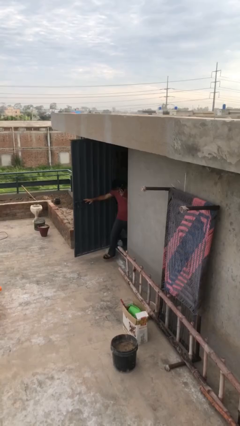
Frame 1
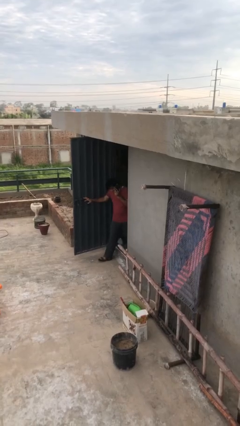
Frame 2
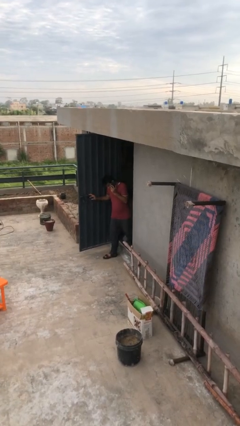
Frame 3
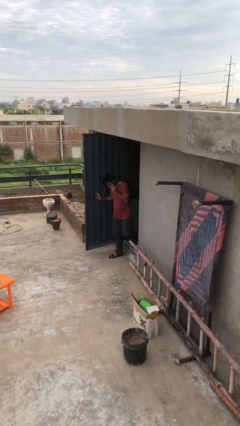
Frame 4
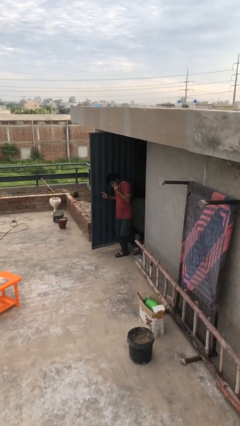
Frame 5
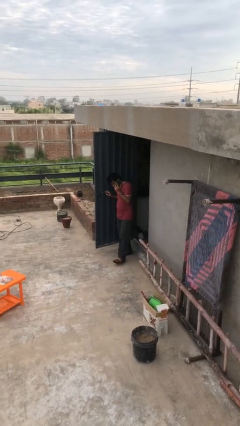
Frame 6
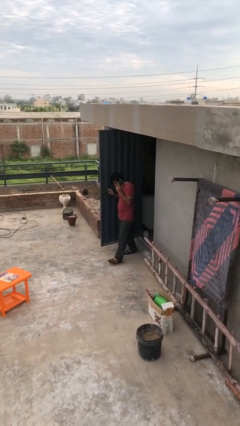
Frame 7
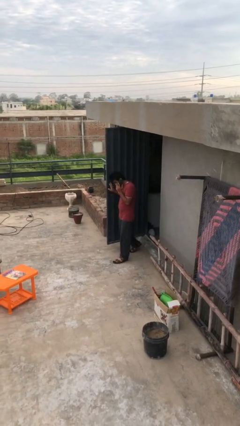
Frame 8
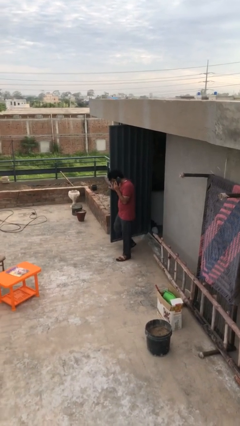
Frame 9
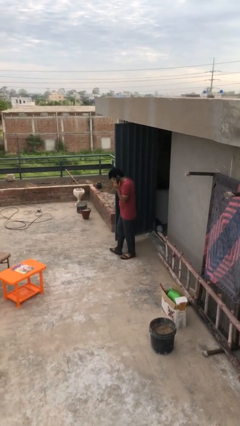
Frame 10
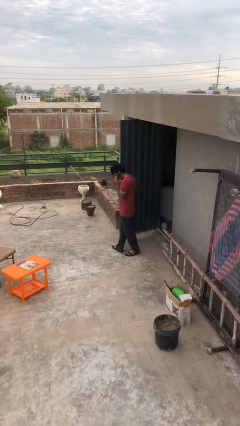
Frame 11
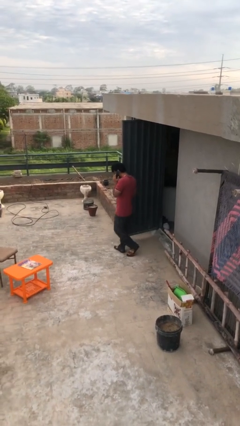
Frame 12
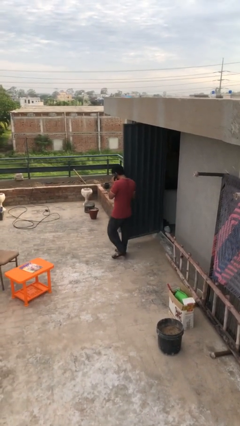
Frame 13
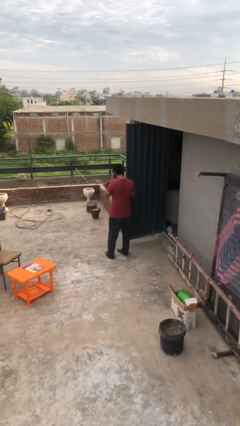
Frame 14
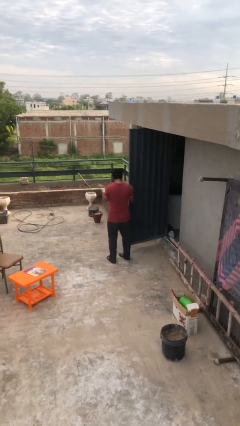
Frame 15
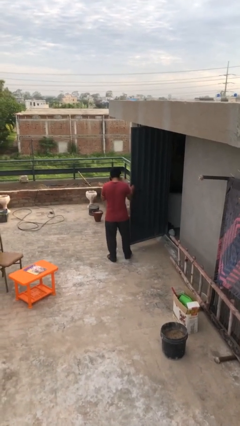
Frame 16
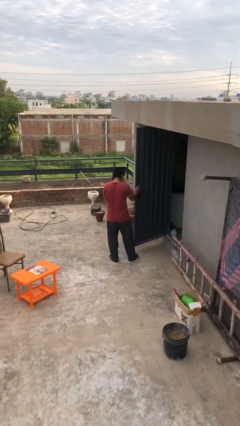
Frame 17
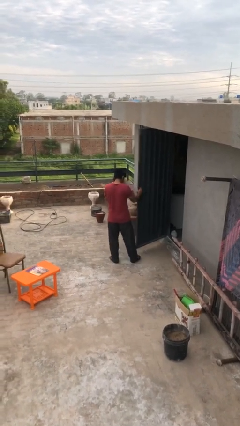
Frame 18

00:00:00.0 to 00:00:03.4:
person enters scene through structure

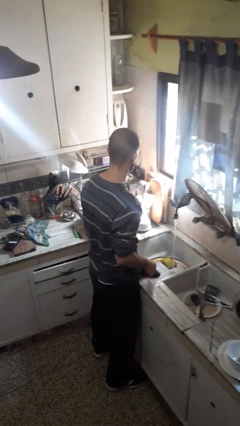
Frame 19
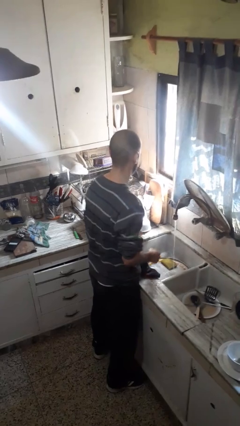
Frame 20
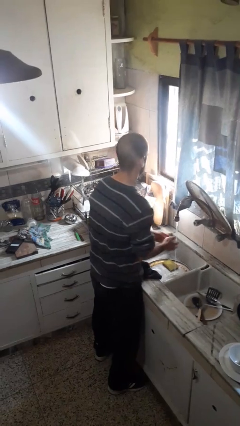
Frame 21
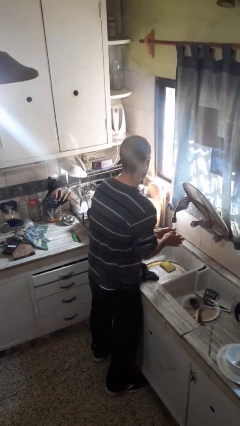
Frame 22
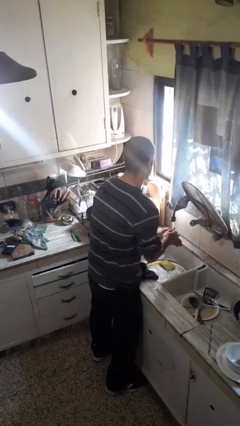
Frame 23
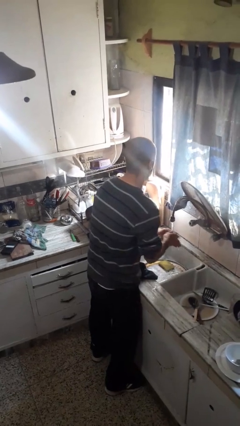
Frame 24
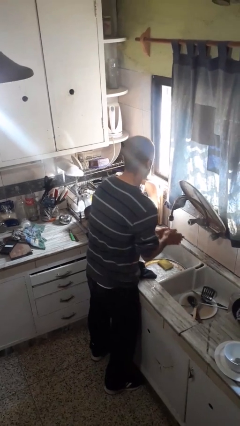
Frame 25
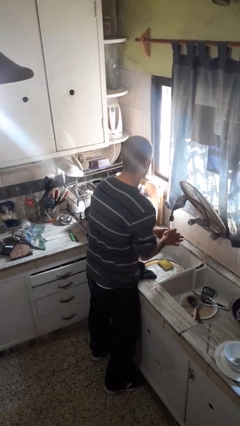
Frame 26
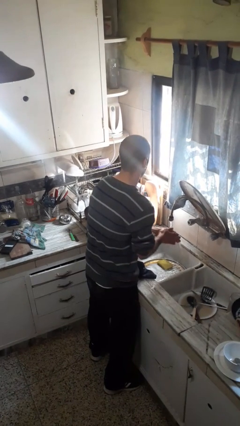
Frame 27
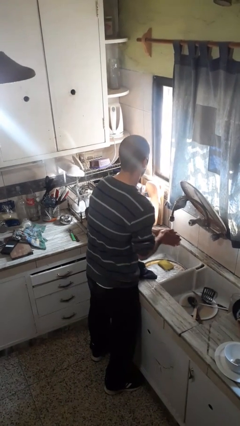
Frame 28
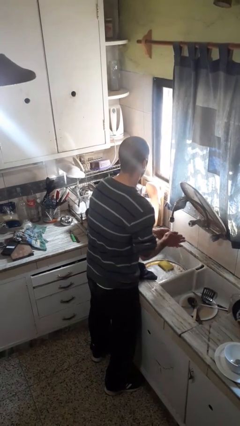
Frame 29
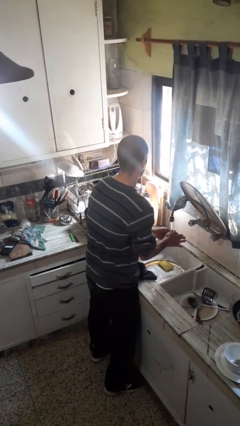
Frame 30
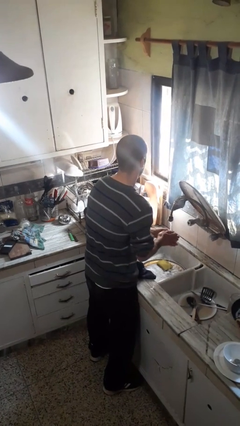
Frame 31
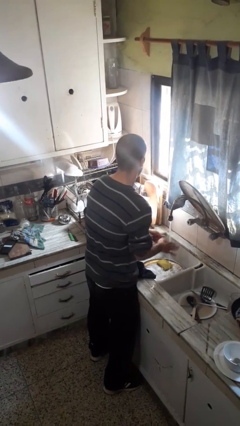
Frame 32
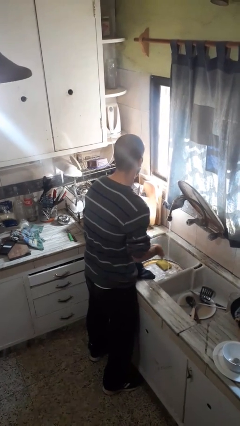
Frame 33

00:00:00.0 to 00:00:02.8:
person washes hands

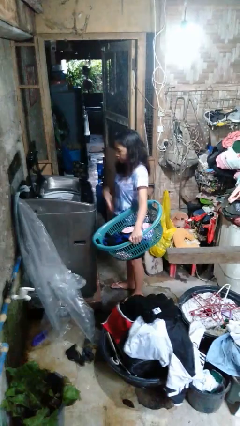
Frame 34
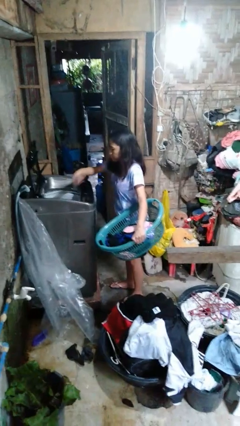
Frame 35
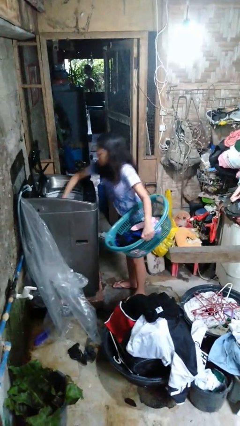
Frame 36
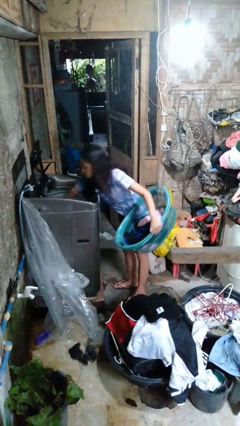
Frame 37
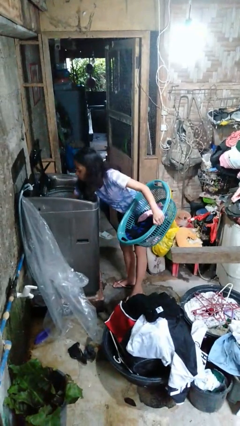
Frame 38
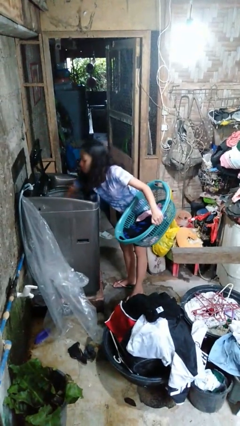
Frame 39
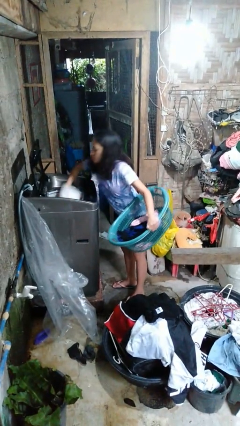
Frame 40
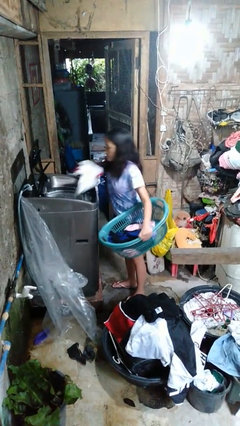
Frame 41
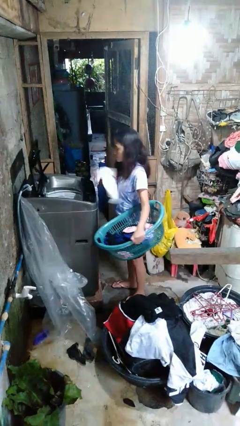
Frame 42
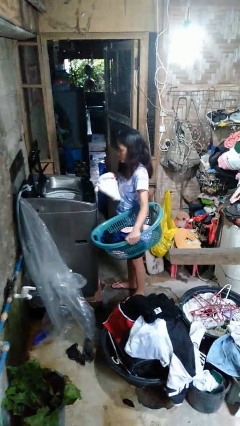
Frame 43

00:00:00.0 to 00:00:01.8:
person unloads clotheswasher

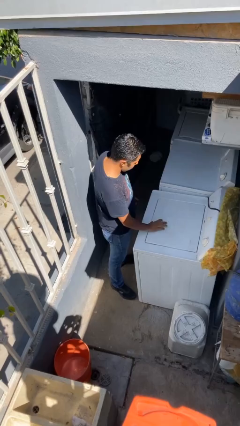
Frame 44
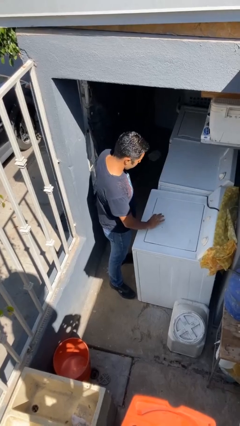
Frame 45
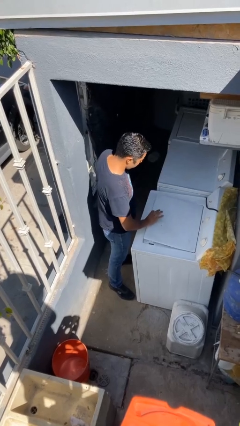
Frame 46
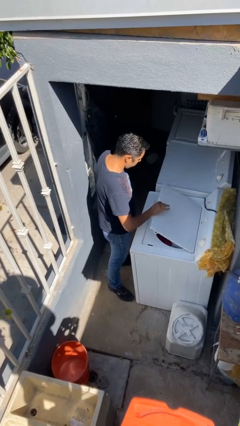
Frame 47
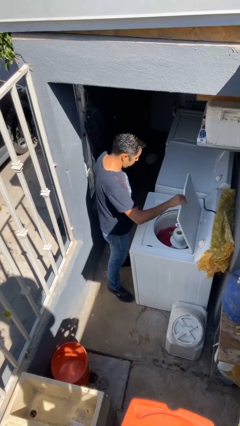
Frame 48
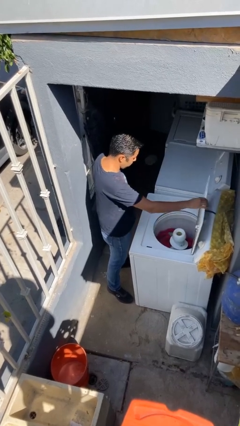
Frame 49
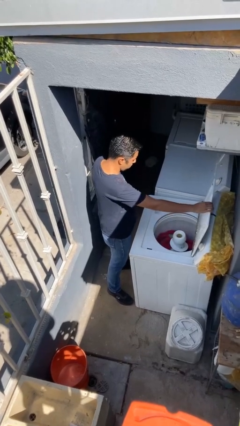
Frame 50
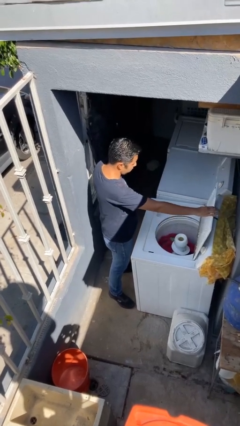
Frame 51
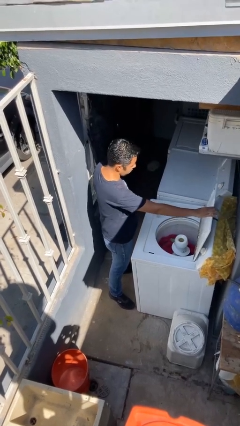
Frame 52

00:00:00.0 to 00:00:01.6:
person opens clothes washer

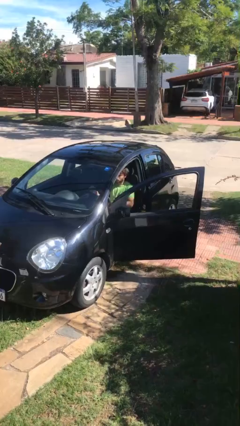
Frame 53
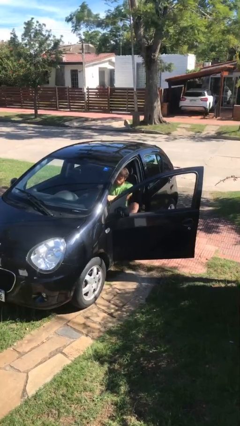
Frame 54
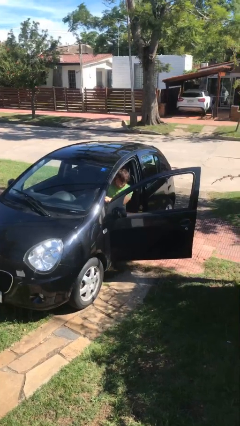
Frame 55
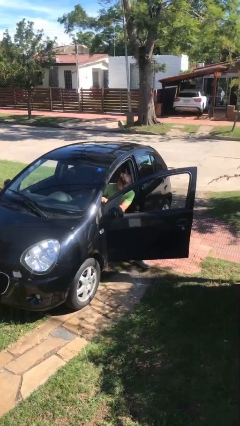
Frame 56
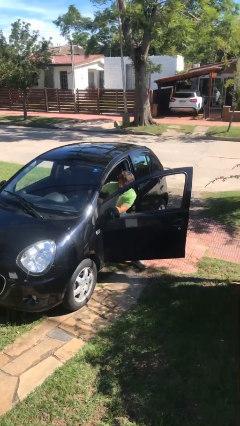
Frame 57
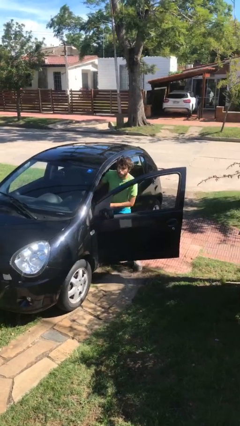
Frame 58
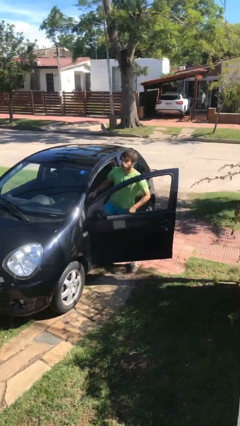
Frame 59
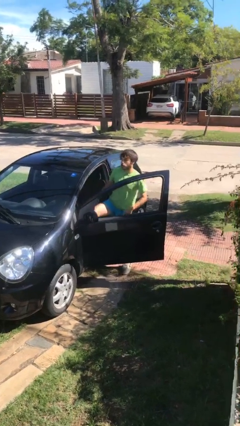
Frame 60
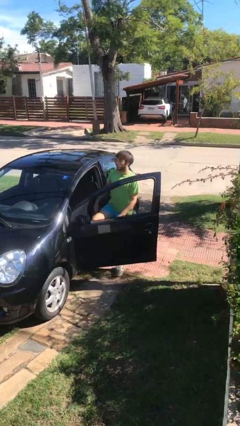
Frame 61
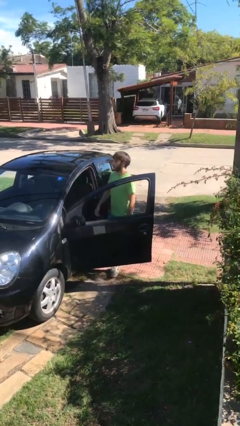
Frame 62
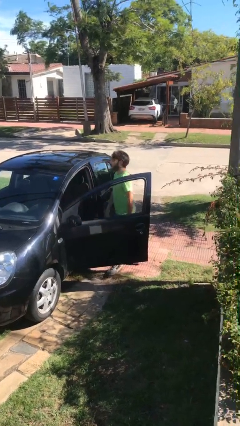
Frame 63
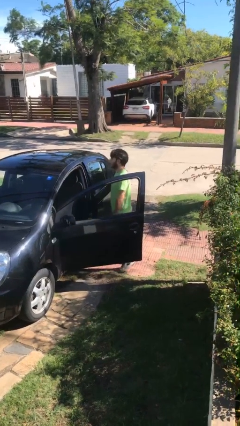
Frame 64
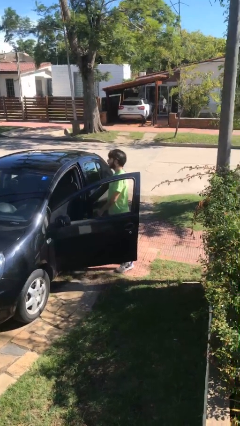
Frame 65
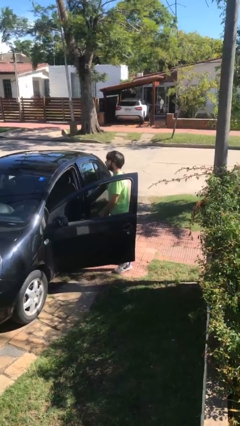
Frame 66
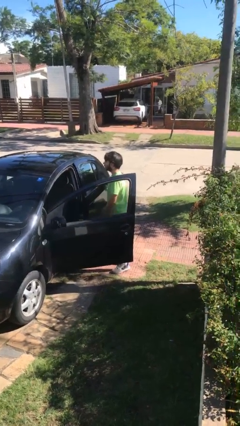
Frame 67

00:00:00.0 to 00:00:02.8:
person exits car

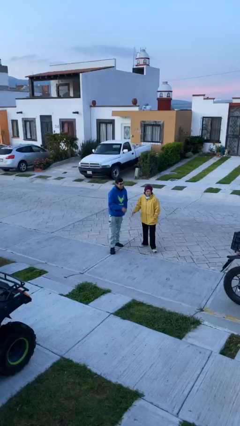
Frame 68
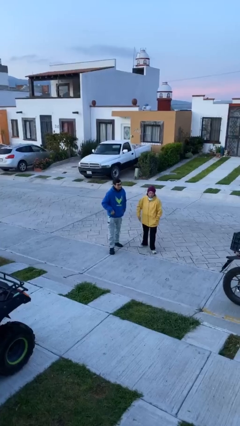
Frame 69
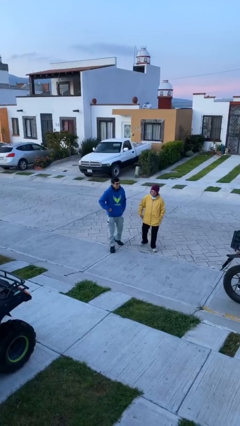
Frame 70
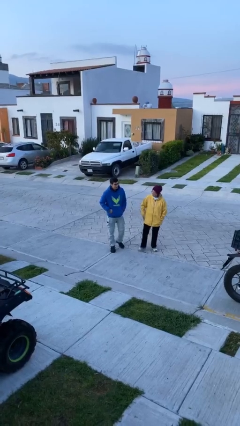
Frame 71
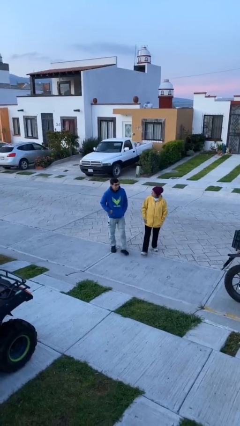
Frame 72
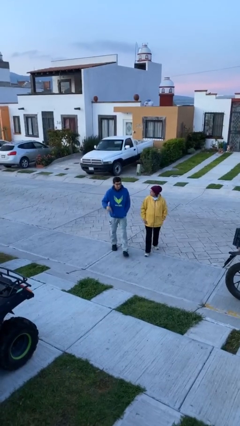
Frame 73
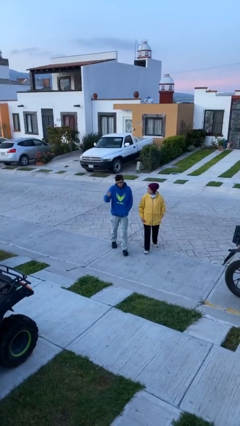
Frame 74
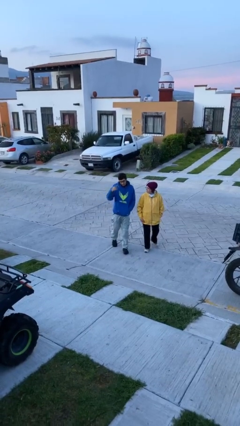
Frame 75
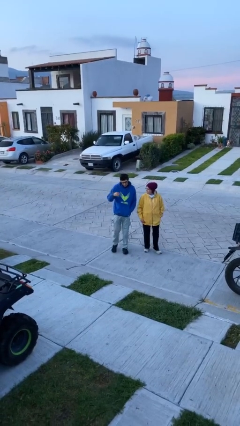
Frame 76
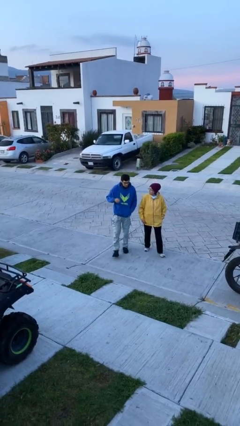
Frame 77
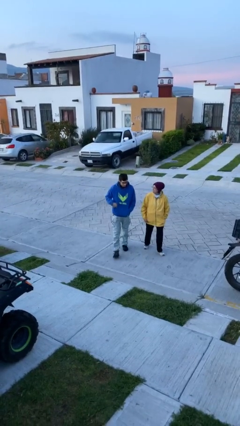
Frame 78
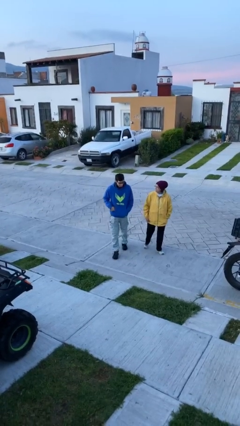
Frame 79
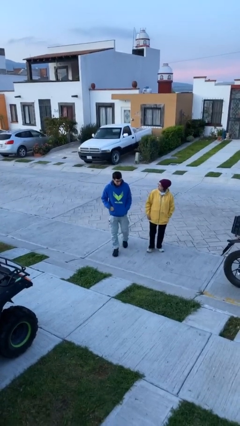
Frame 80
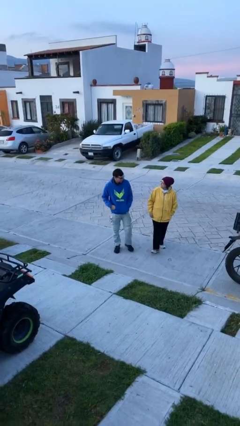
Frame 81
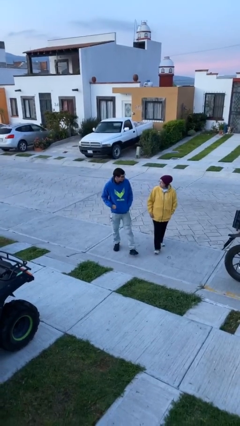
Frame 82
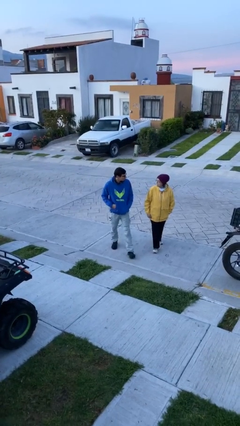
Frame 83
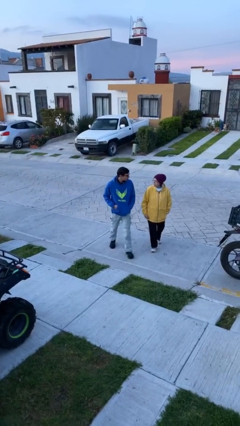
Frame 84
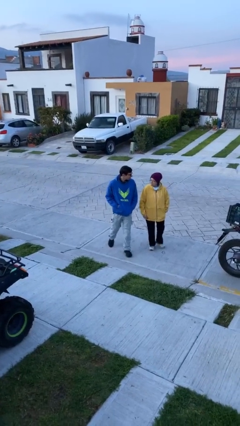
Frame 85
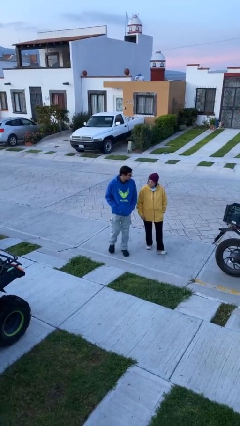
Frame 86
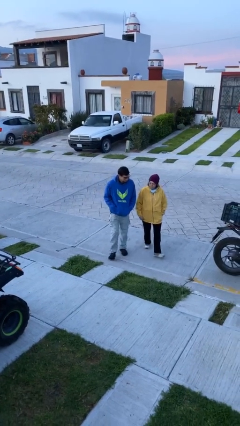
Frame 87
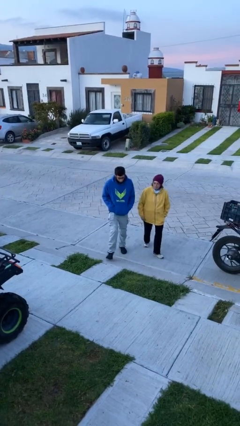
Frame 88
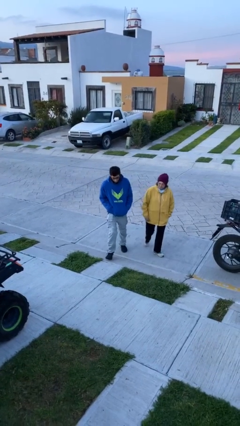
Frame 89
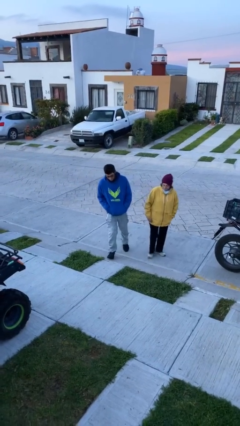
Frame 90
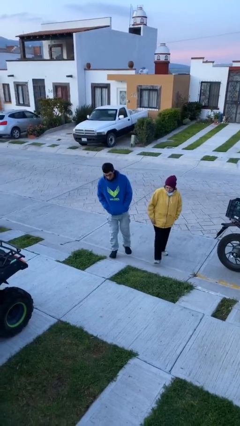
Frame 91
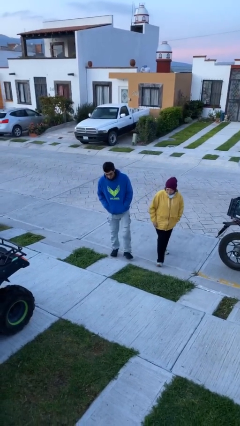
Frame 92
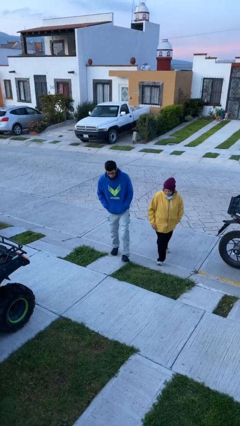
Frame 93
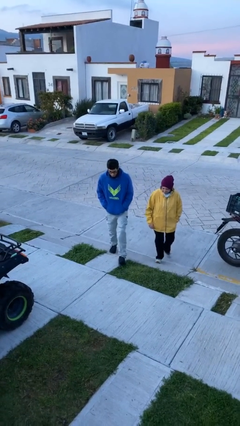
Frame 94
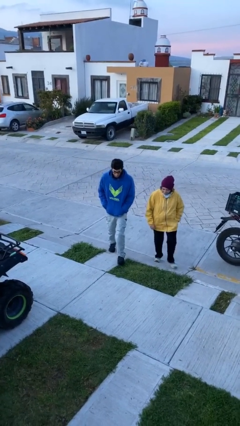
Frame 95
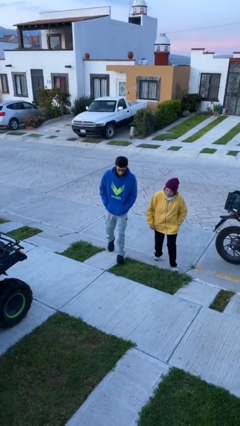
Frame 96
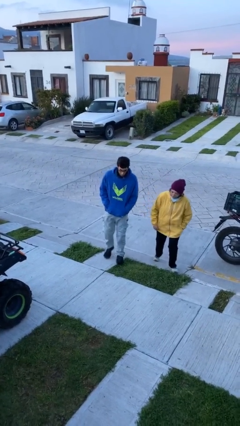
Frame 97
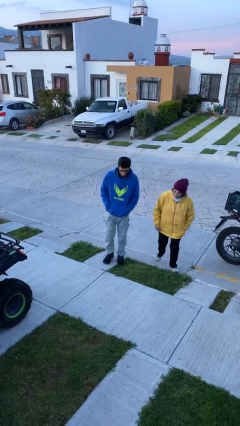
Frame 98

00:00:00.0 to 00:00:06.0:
person talks to person
